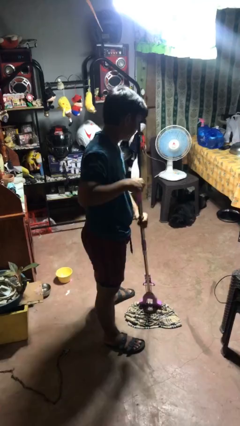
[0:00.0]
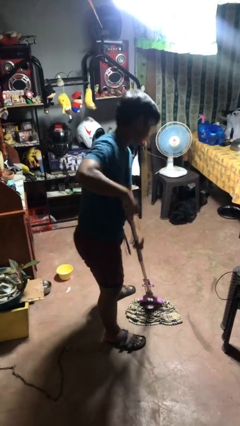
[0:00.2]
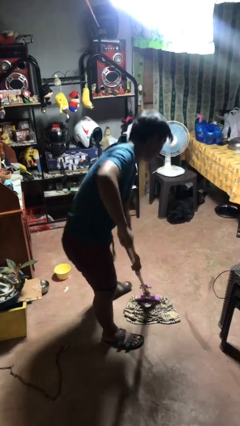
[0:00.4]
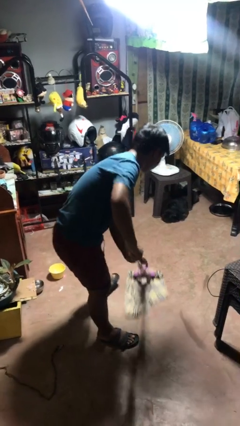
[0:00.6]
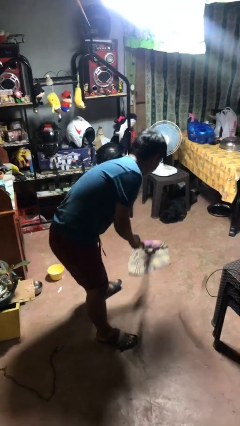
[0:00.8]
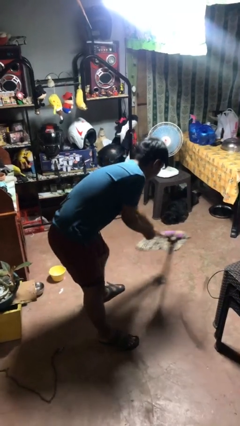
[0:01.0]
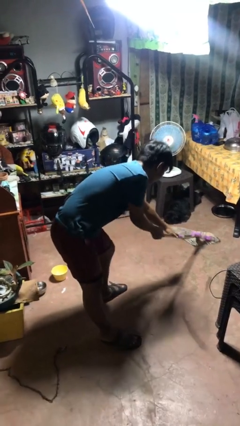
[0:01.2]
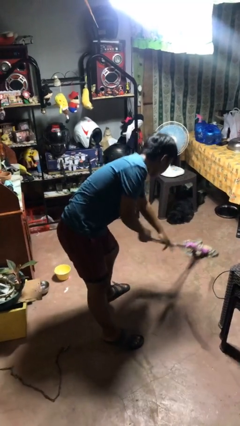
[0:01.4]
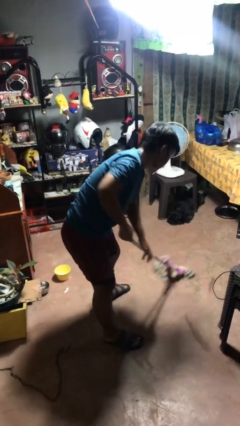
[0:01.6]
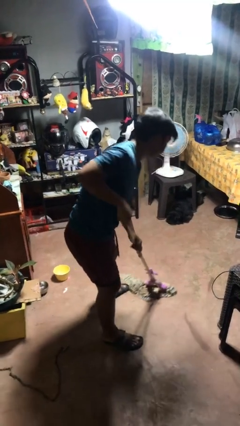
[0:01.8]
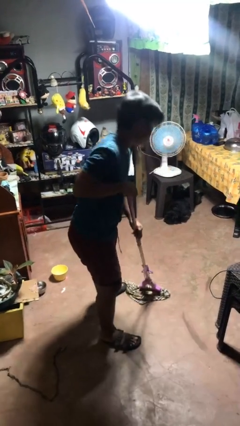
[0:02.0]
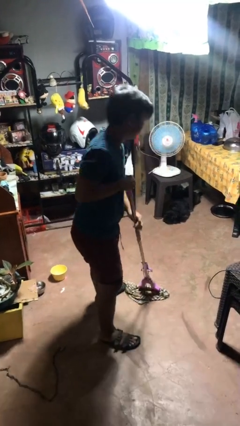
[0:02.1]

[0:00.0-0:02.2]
person mops

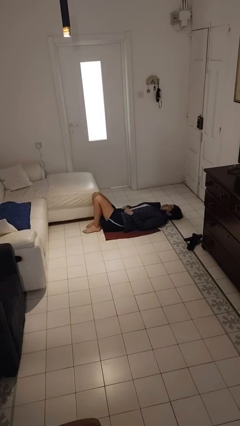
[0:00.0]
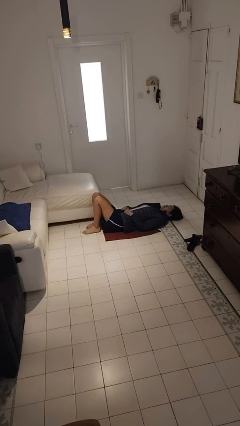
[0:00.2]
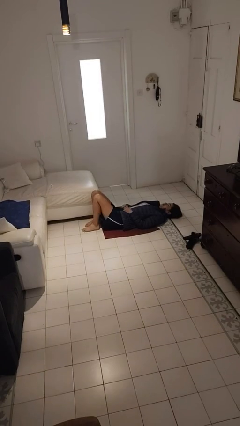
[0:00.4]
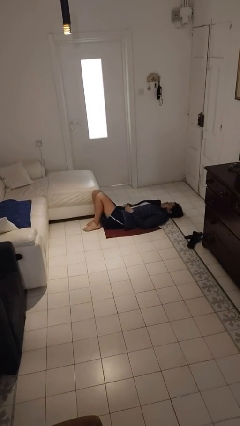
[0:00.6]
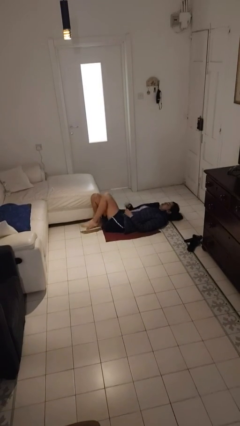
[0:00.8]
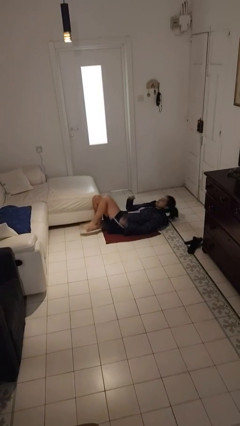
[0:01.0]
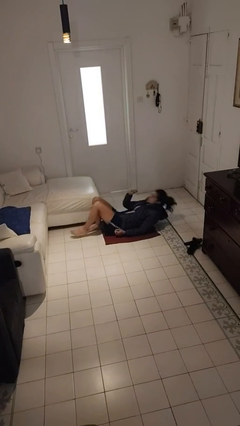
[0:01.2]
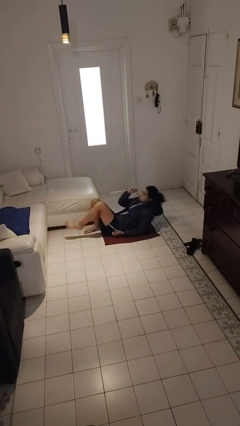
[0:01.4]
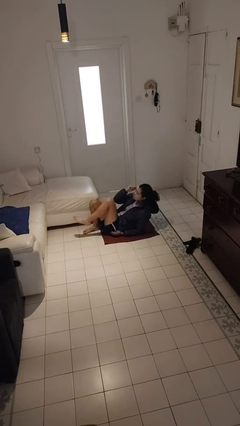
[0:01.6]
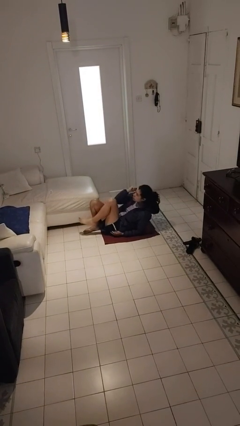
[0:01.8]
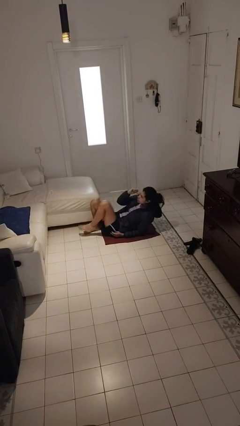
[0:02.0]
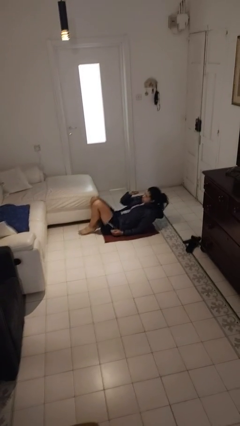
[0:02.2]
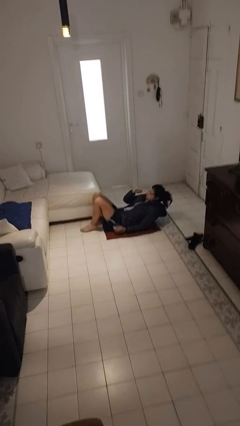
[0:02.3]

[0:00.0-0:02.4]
person exercises with situp

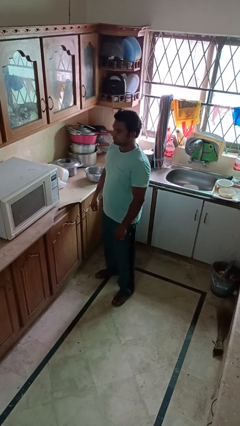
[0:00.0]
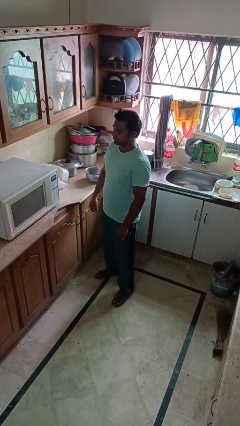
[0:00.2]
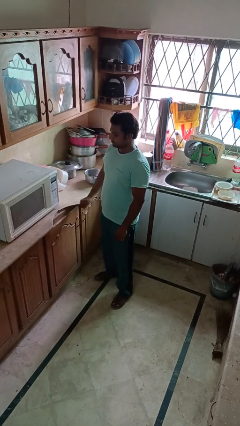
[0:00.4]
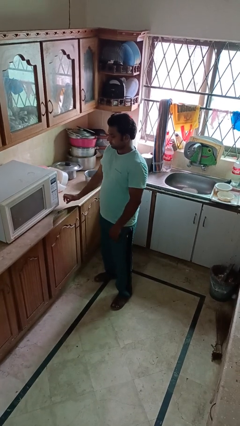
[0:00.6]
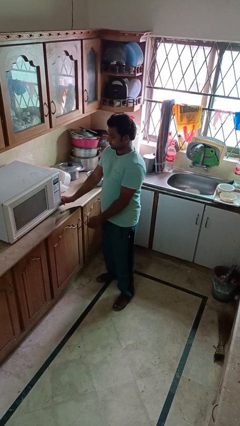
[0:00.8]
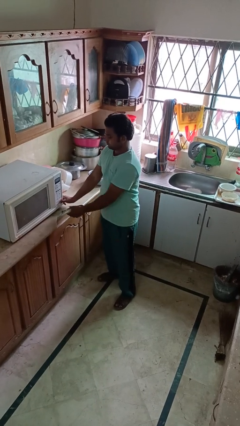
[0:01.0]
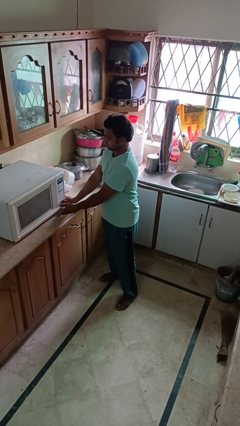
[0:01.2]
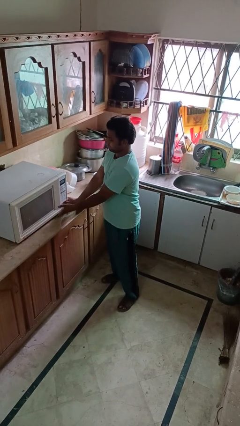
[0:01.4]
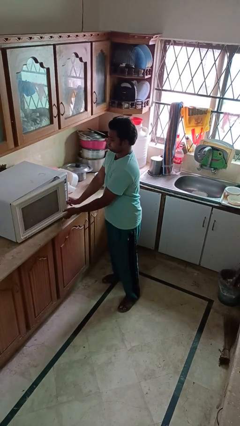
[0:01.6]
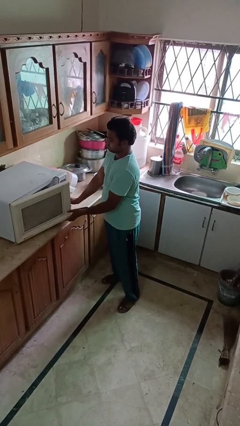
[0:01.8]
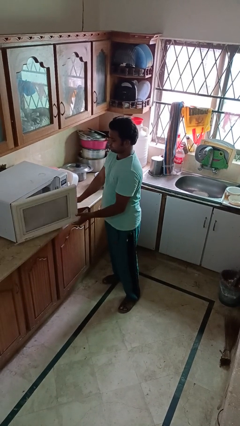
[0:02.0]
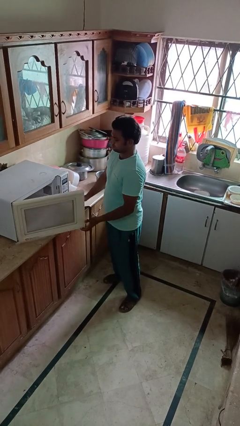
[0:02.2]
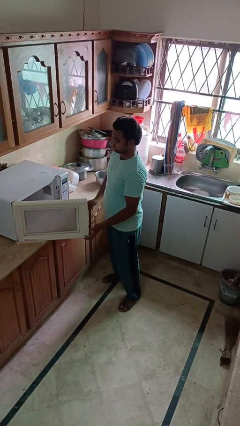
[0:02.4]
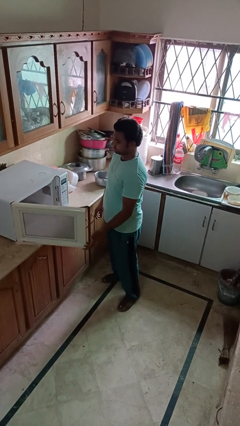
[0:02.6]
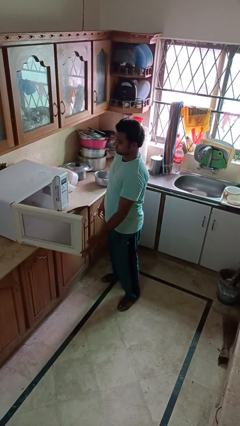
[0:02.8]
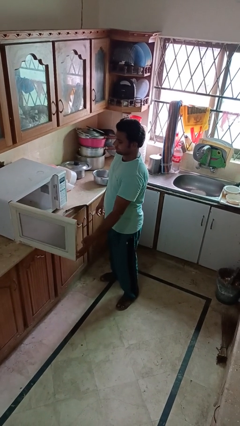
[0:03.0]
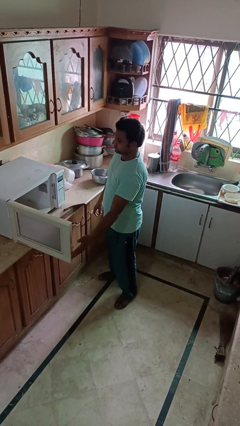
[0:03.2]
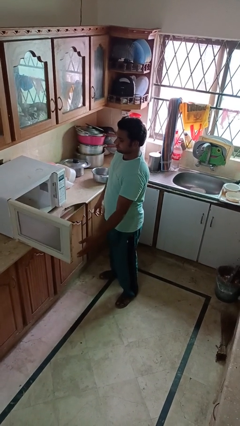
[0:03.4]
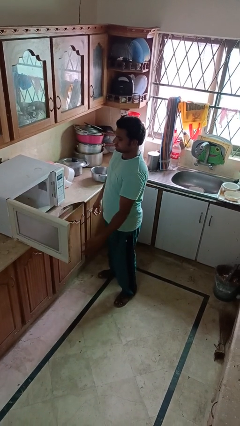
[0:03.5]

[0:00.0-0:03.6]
person opens microwave

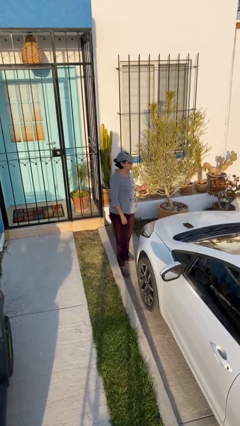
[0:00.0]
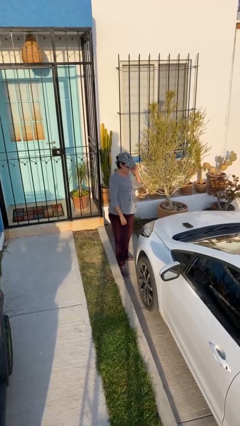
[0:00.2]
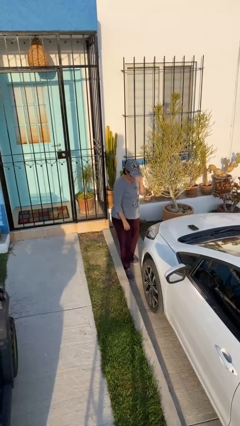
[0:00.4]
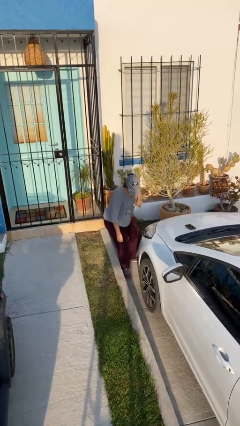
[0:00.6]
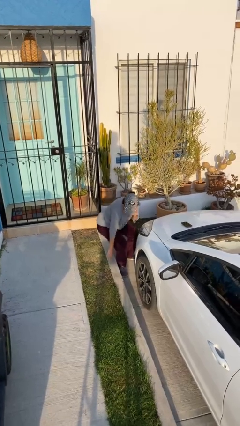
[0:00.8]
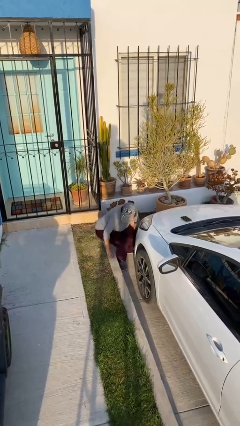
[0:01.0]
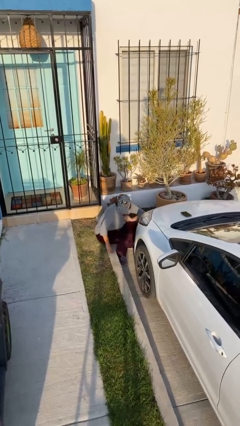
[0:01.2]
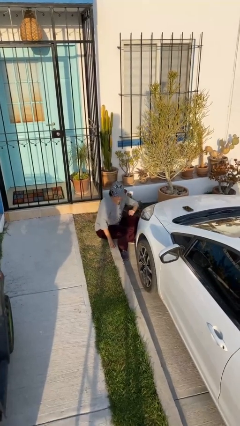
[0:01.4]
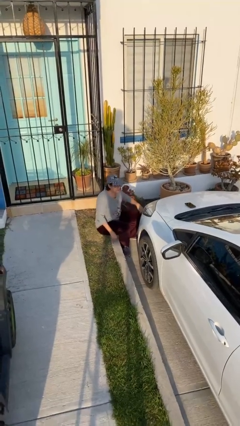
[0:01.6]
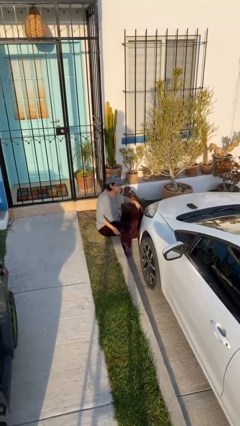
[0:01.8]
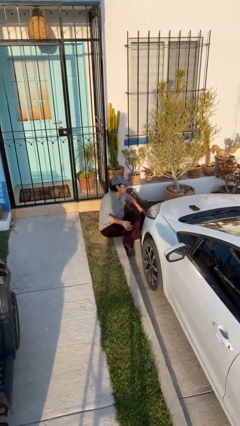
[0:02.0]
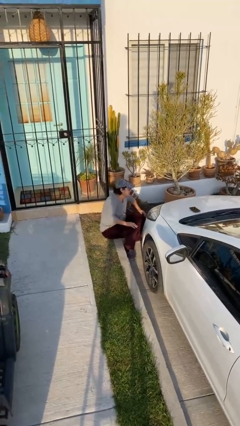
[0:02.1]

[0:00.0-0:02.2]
person sits down

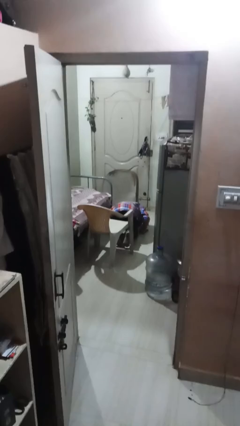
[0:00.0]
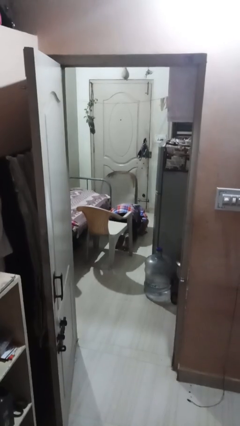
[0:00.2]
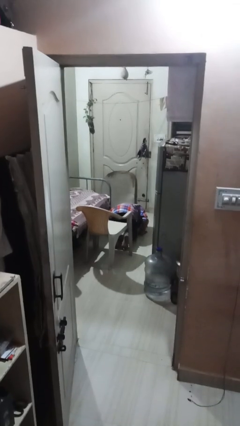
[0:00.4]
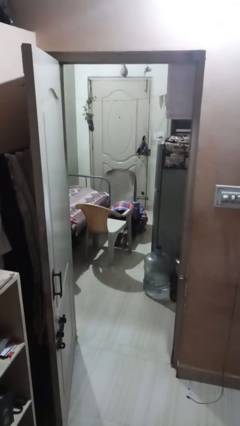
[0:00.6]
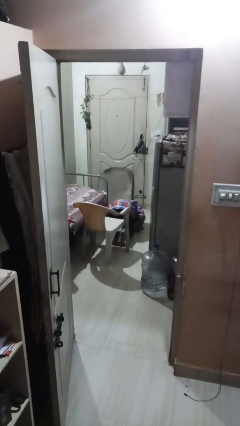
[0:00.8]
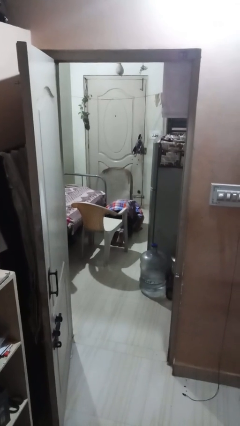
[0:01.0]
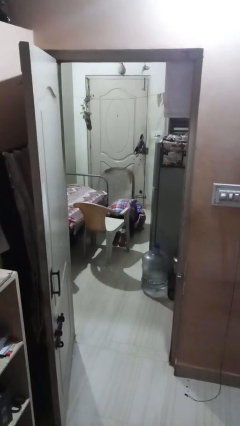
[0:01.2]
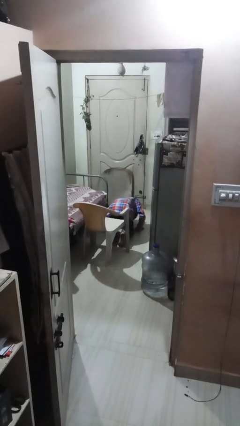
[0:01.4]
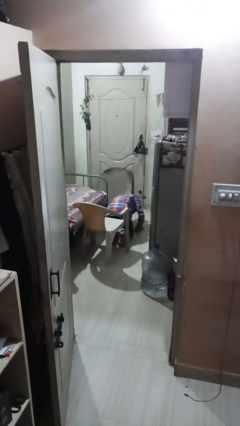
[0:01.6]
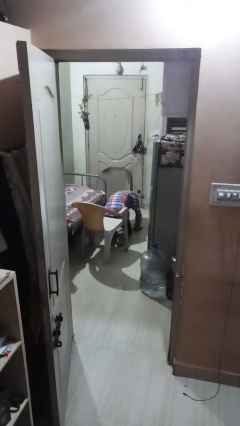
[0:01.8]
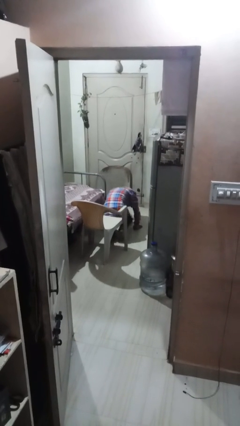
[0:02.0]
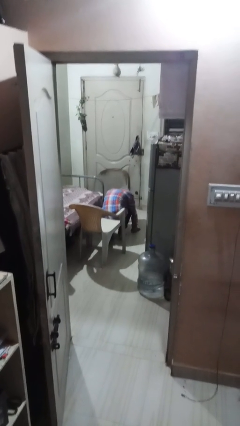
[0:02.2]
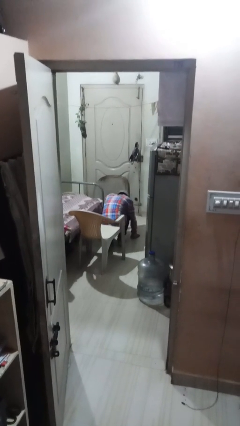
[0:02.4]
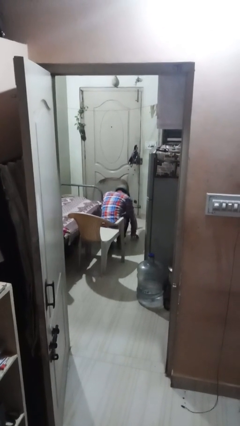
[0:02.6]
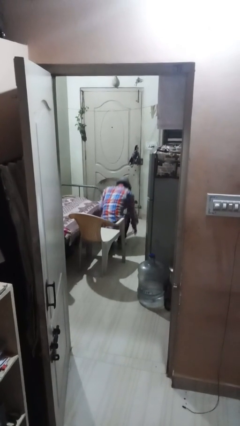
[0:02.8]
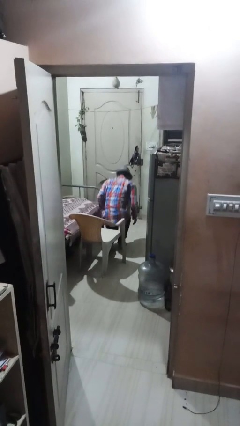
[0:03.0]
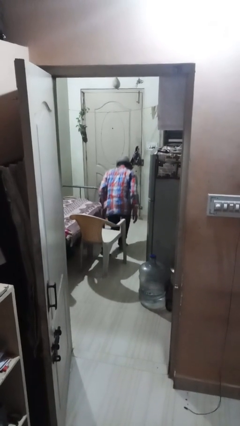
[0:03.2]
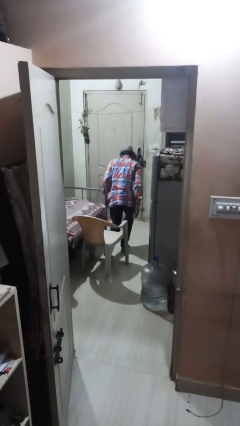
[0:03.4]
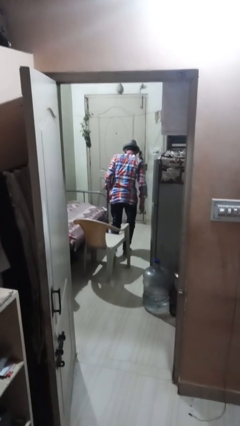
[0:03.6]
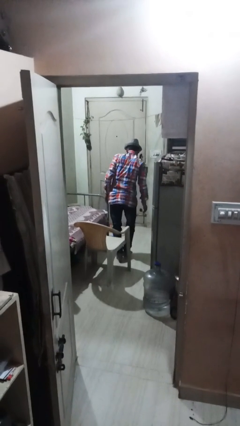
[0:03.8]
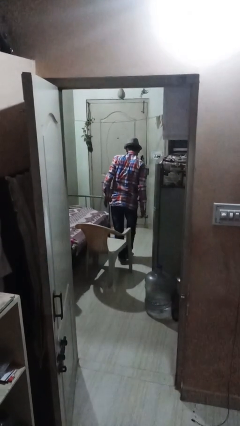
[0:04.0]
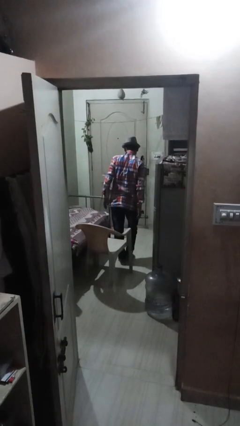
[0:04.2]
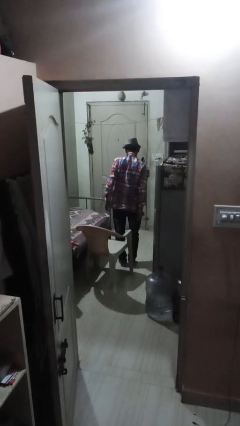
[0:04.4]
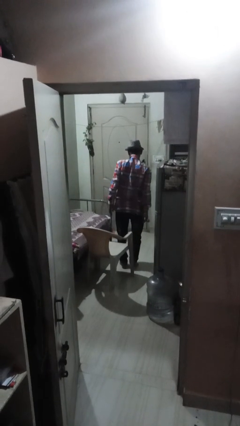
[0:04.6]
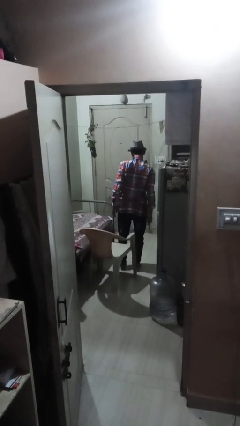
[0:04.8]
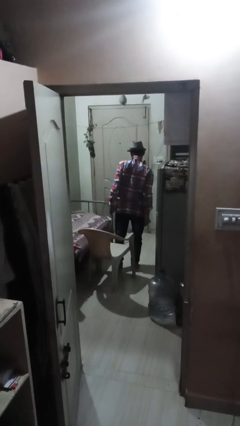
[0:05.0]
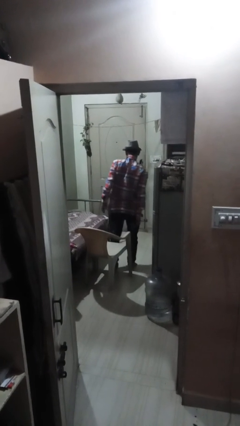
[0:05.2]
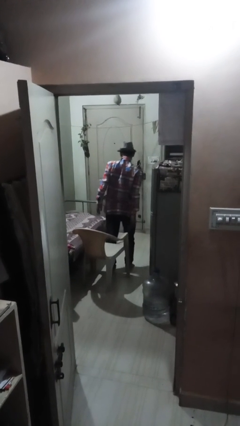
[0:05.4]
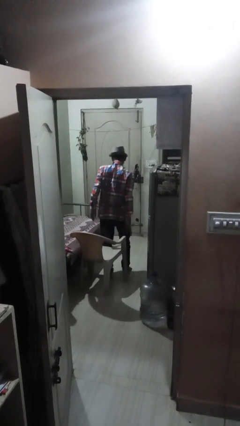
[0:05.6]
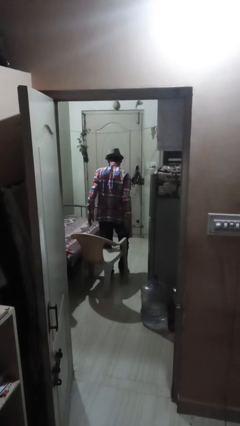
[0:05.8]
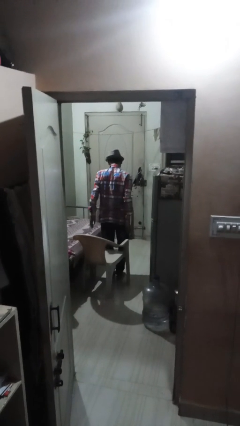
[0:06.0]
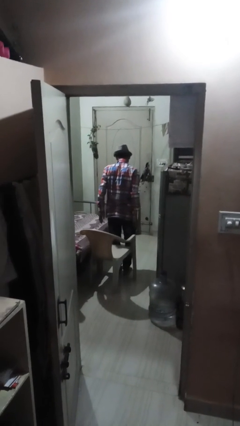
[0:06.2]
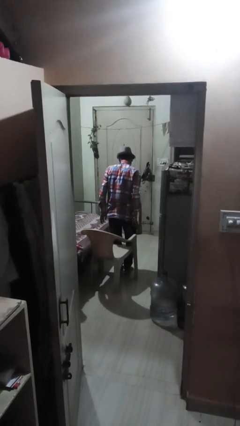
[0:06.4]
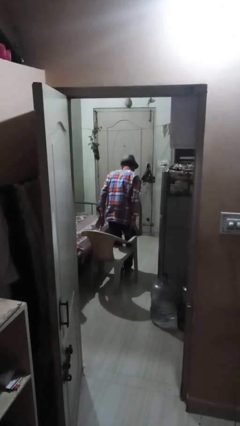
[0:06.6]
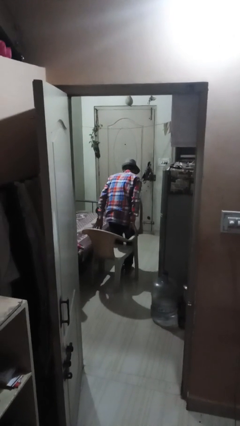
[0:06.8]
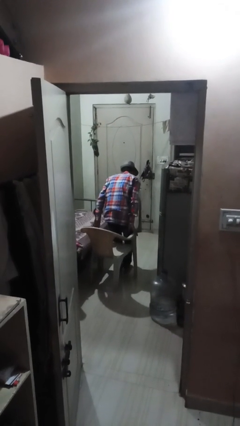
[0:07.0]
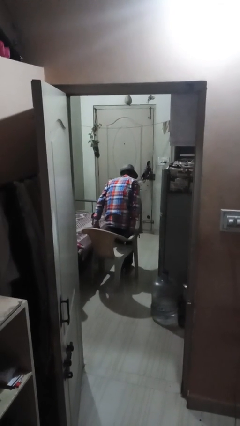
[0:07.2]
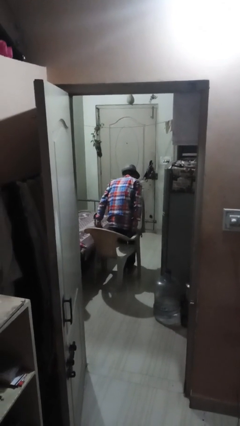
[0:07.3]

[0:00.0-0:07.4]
person stands up from floor
